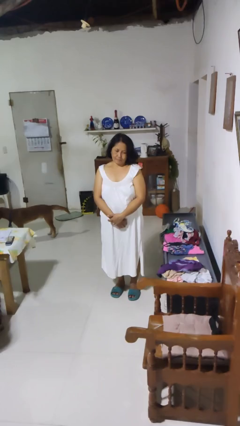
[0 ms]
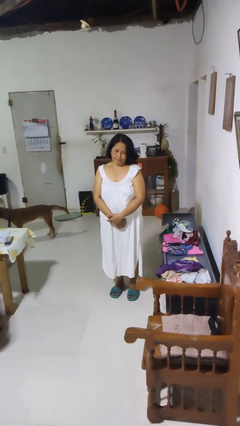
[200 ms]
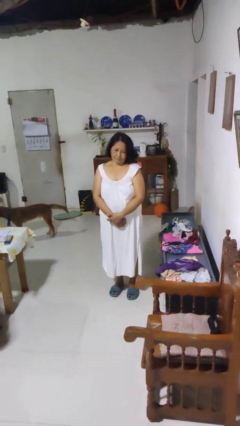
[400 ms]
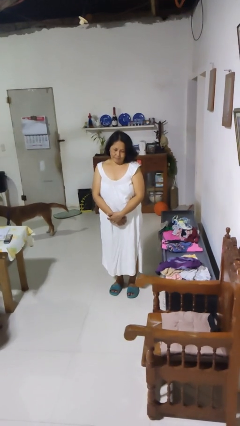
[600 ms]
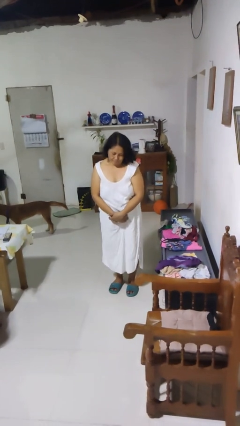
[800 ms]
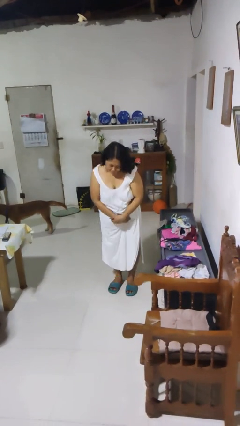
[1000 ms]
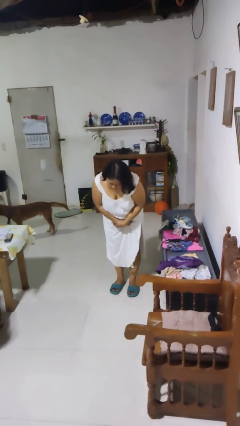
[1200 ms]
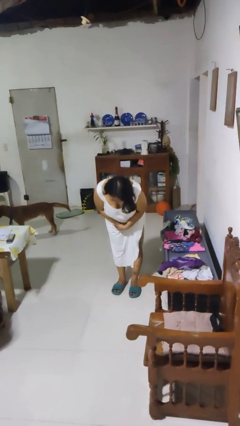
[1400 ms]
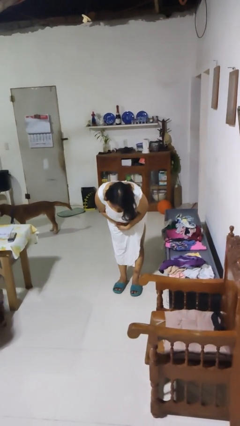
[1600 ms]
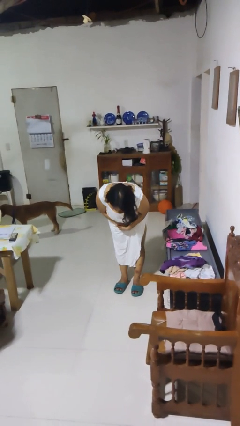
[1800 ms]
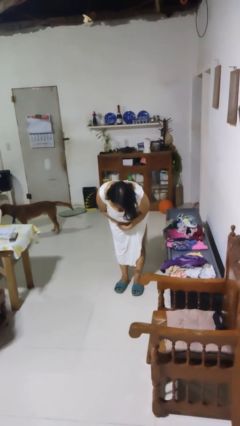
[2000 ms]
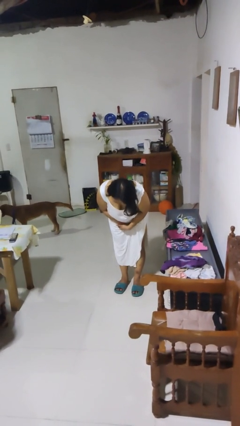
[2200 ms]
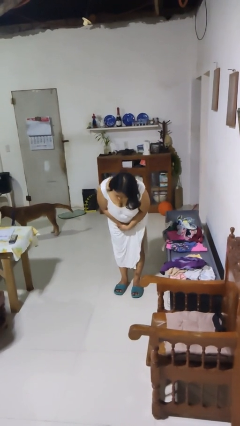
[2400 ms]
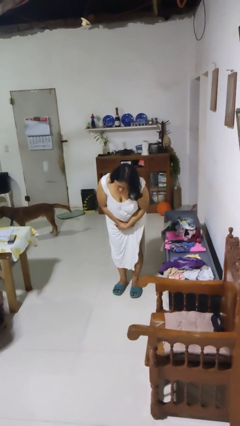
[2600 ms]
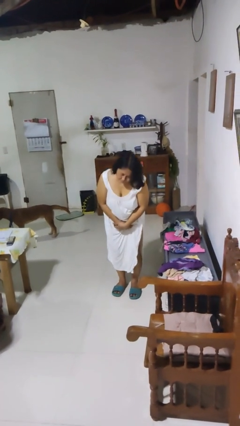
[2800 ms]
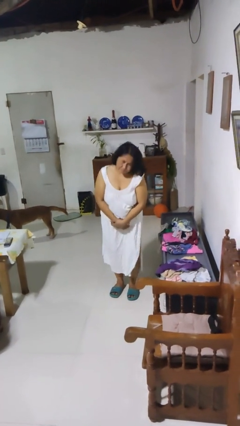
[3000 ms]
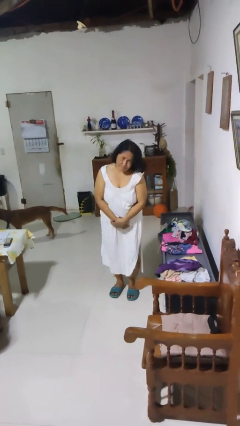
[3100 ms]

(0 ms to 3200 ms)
person bows

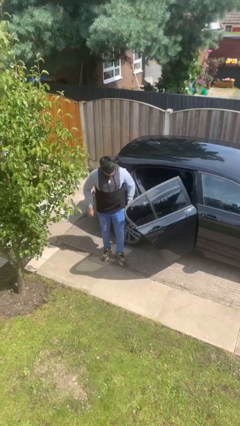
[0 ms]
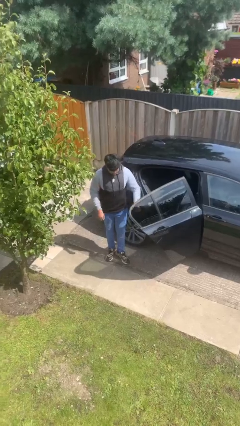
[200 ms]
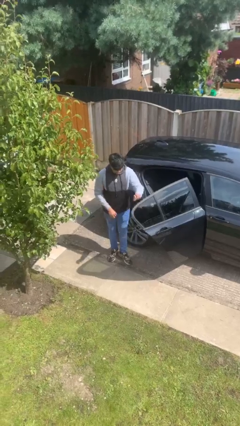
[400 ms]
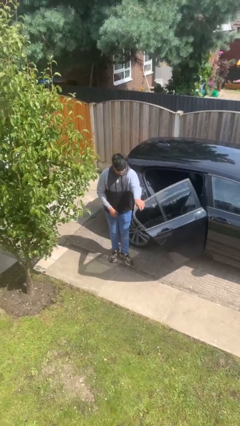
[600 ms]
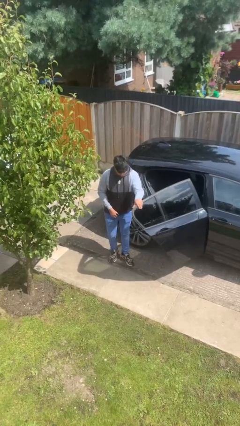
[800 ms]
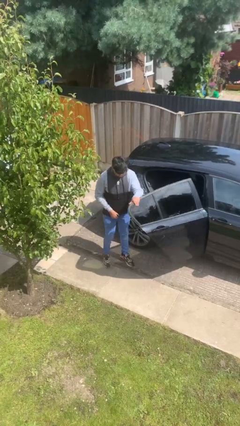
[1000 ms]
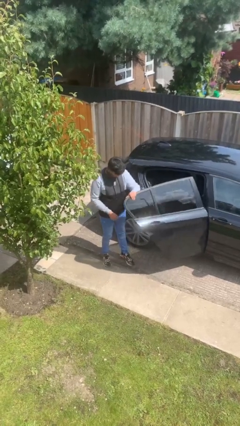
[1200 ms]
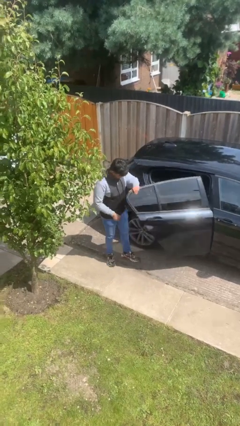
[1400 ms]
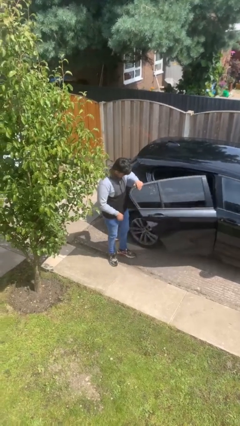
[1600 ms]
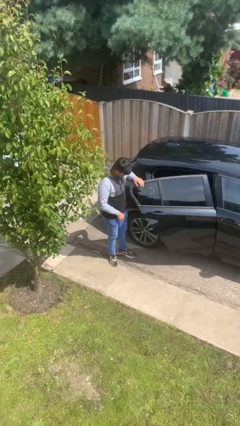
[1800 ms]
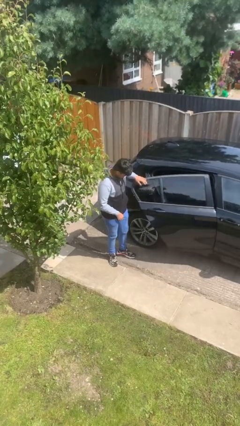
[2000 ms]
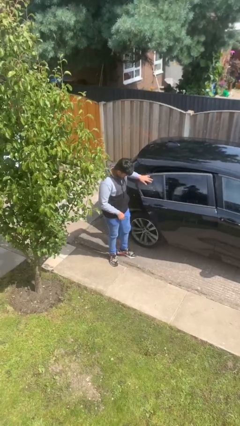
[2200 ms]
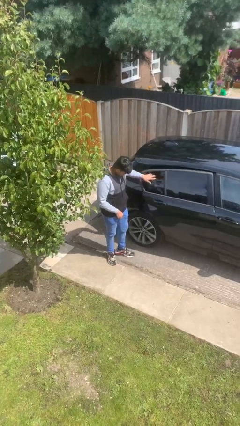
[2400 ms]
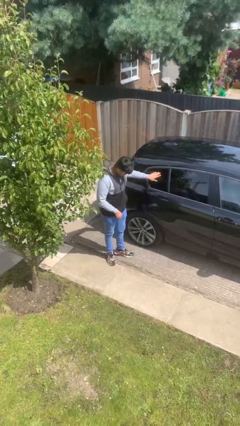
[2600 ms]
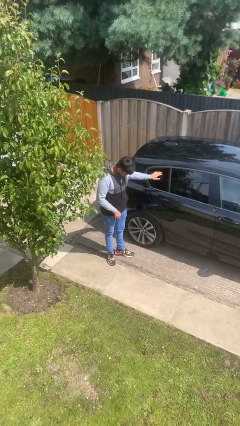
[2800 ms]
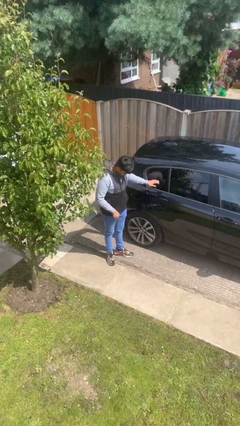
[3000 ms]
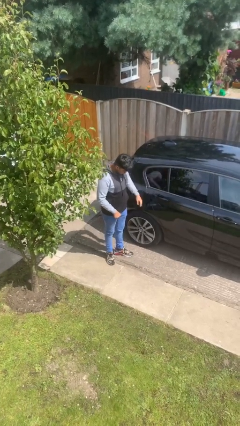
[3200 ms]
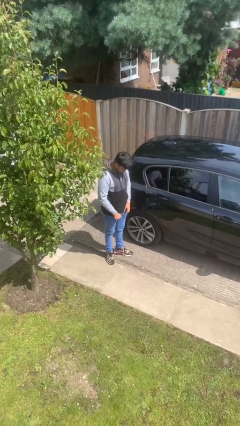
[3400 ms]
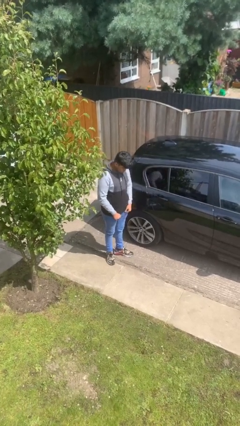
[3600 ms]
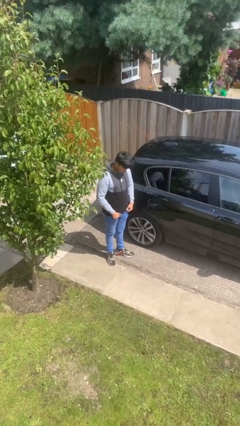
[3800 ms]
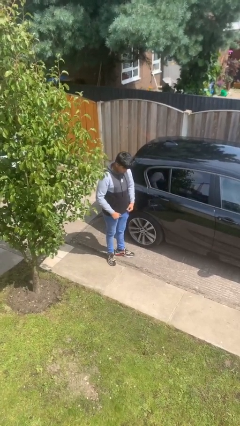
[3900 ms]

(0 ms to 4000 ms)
person closes car door

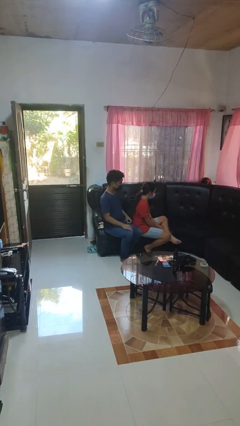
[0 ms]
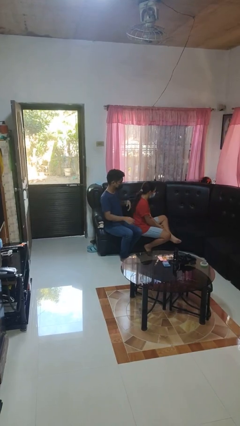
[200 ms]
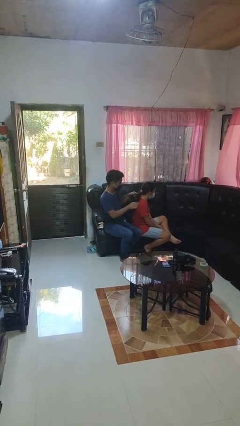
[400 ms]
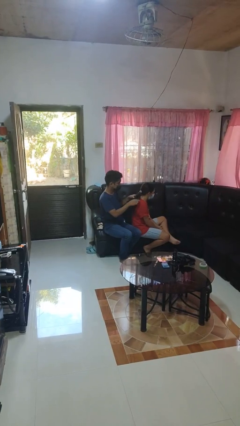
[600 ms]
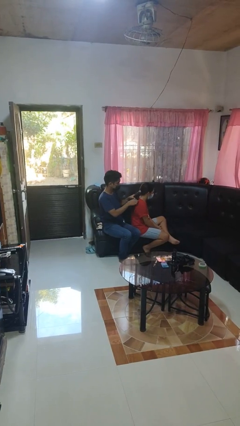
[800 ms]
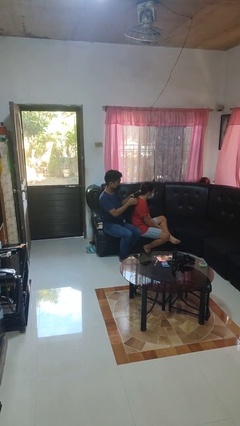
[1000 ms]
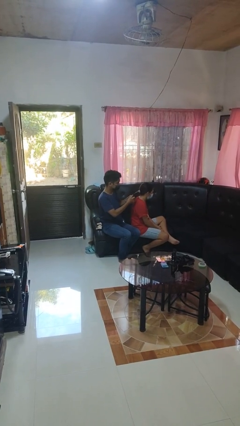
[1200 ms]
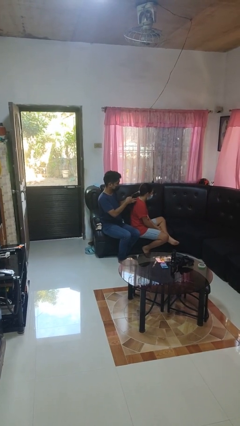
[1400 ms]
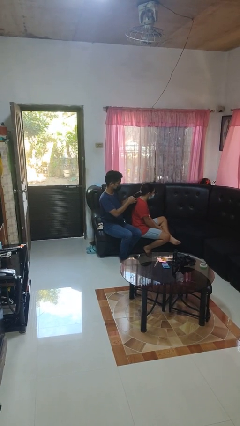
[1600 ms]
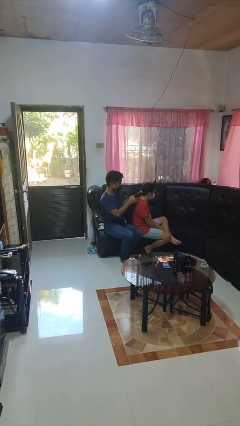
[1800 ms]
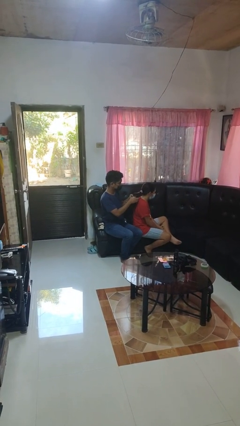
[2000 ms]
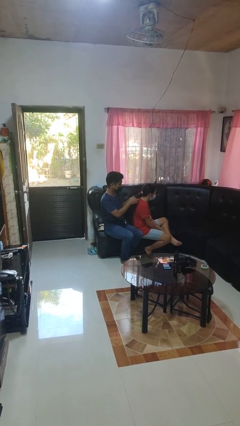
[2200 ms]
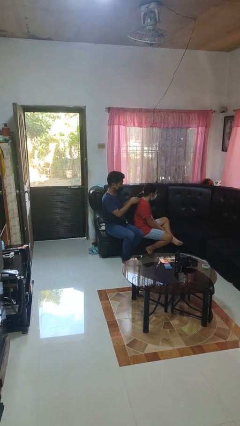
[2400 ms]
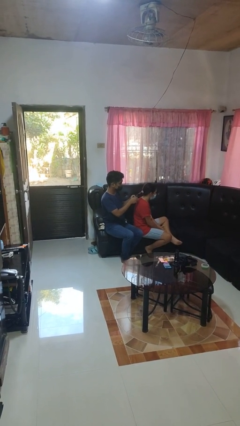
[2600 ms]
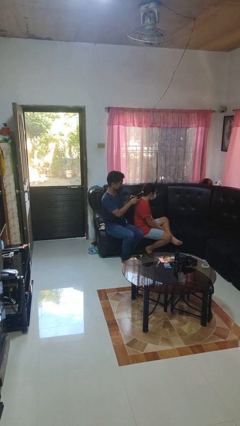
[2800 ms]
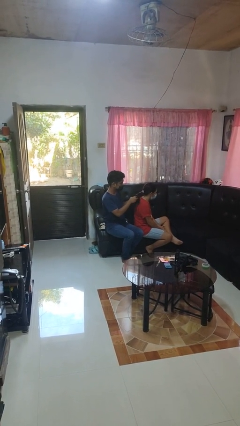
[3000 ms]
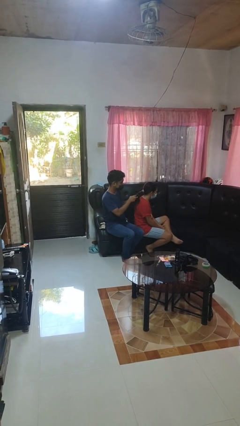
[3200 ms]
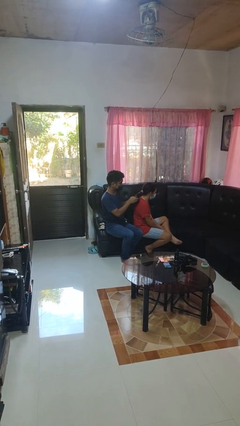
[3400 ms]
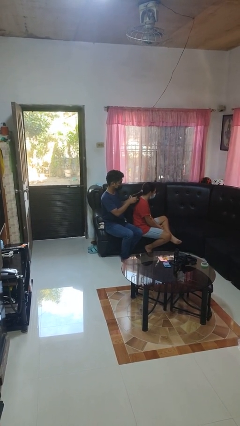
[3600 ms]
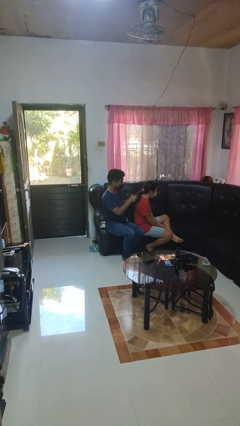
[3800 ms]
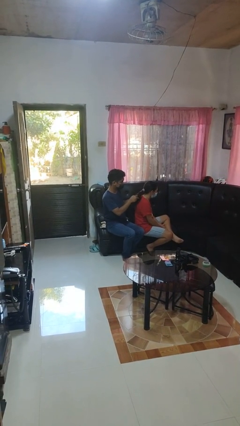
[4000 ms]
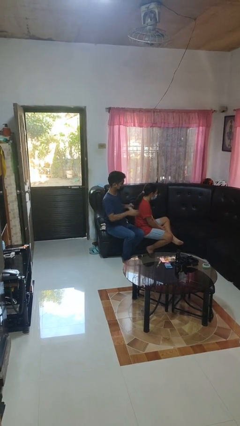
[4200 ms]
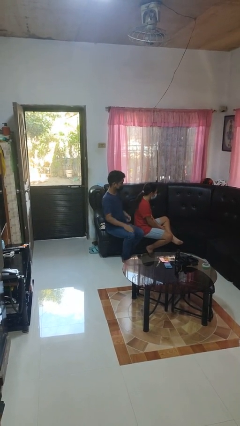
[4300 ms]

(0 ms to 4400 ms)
person braids hair of person

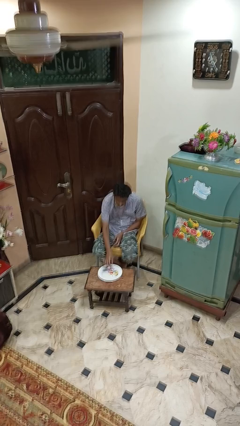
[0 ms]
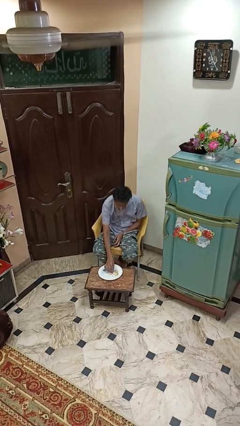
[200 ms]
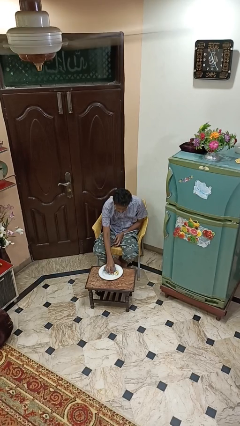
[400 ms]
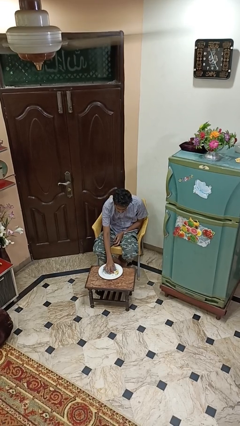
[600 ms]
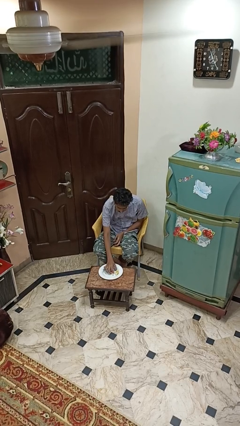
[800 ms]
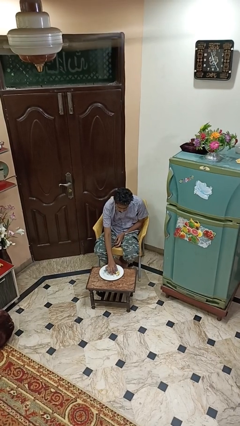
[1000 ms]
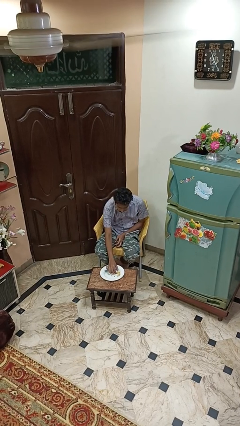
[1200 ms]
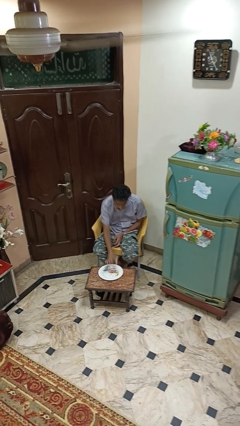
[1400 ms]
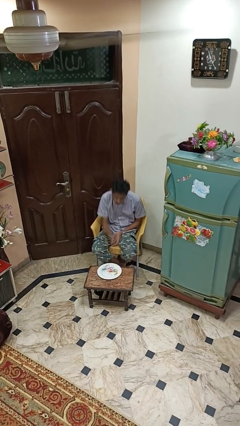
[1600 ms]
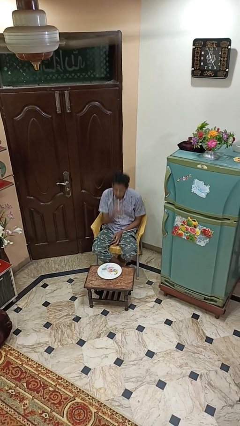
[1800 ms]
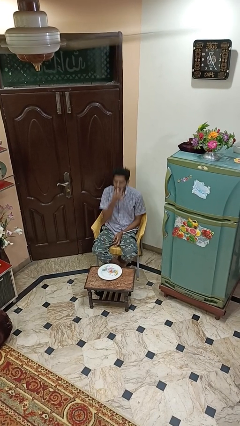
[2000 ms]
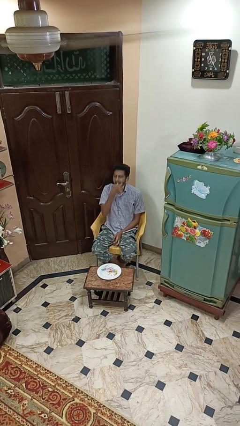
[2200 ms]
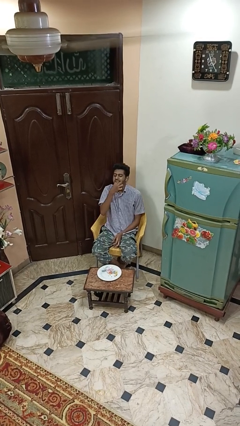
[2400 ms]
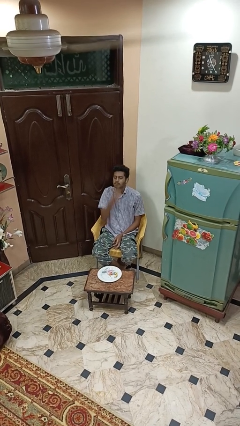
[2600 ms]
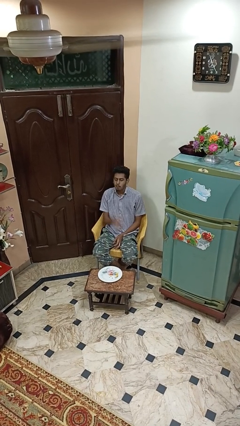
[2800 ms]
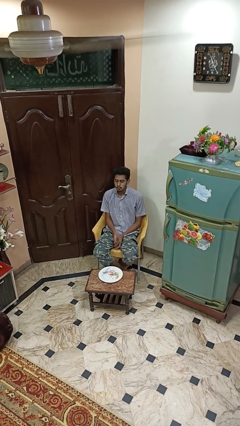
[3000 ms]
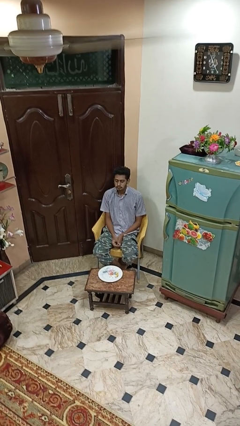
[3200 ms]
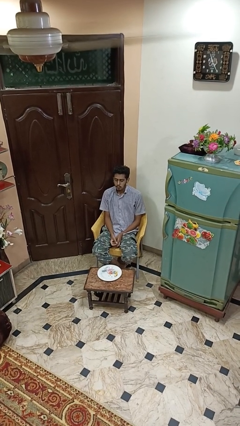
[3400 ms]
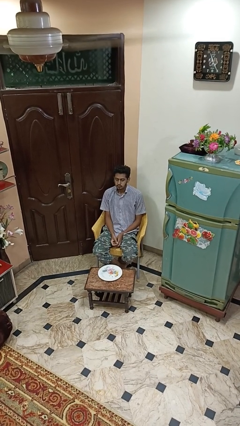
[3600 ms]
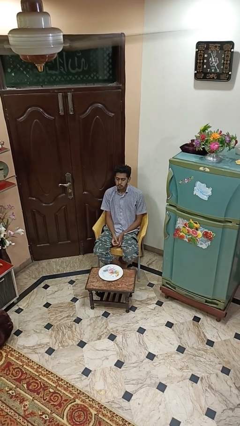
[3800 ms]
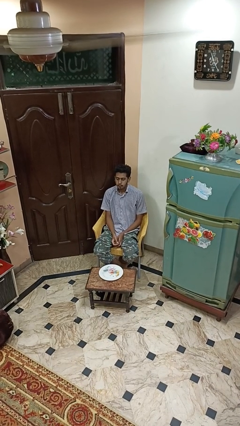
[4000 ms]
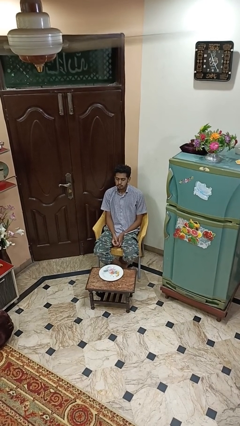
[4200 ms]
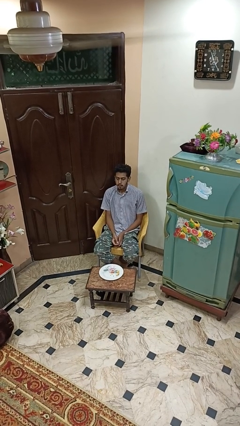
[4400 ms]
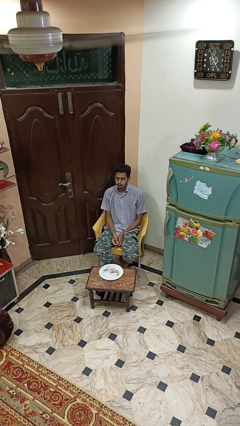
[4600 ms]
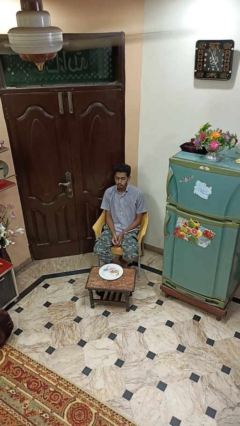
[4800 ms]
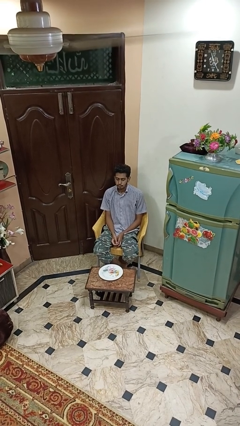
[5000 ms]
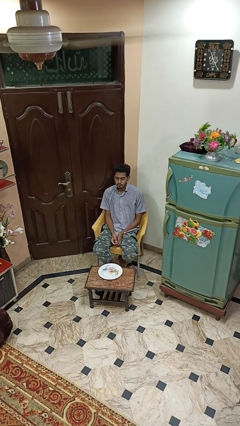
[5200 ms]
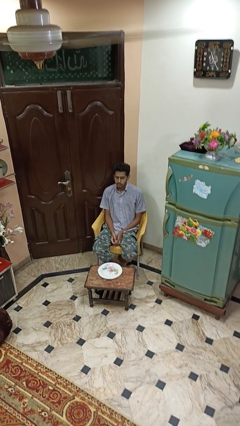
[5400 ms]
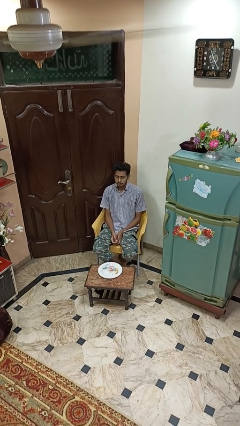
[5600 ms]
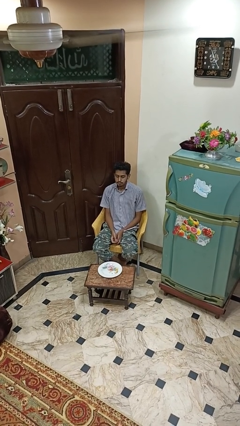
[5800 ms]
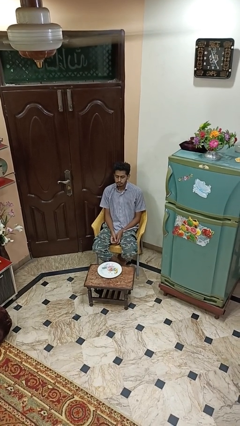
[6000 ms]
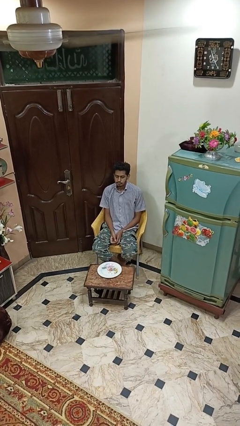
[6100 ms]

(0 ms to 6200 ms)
person eats with hands
